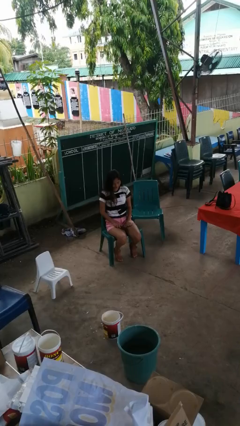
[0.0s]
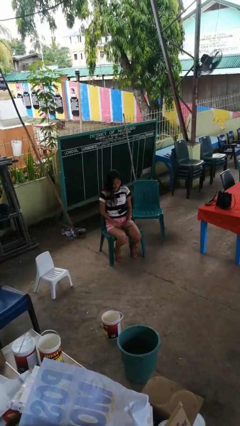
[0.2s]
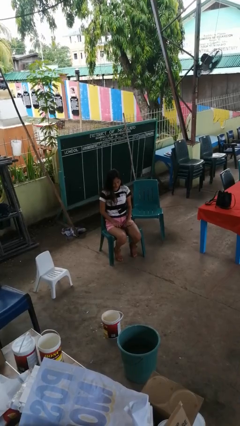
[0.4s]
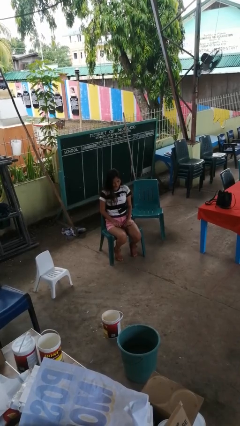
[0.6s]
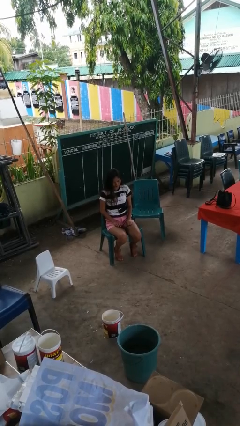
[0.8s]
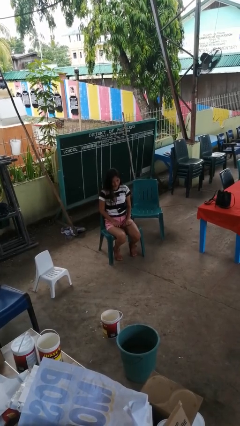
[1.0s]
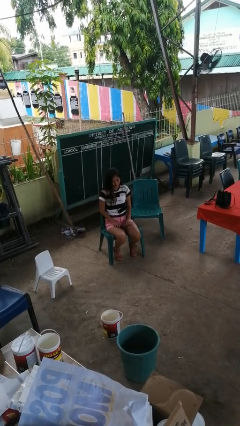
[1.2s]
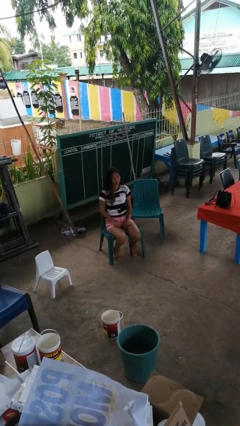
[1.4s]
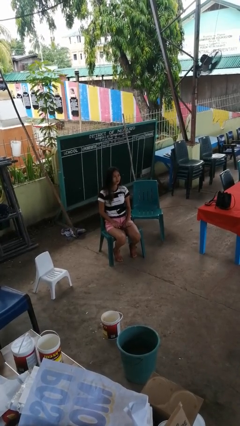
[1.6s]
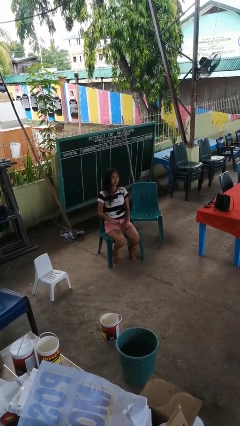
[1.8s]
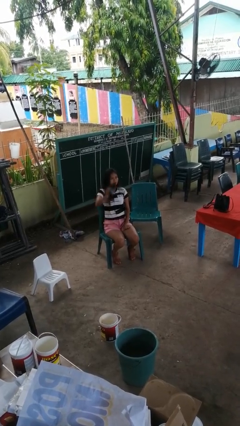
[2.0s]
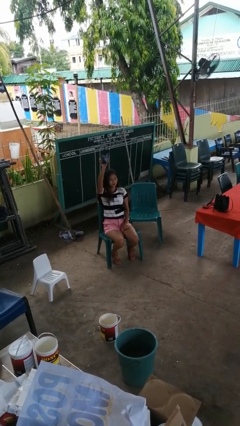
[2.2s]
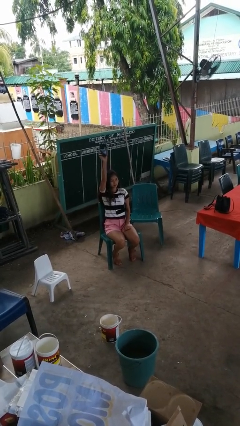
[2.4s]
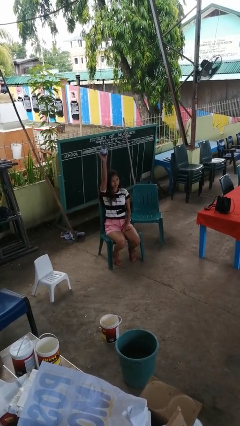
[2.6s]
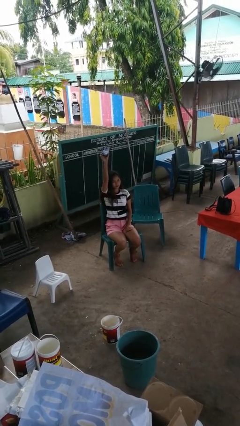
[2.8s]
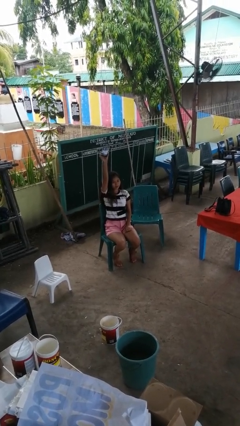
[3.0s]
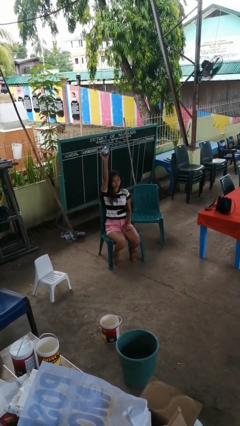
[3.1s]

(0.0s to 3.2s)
person holds object above head

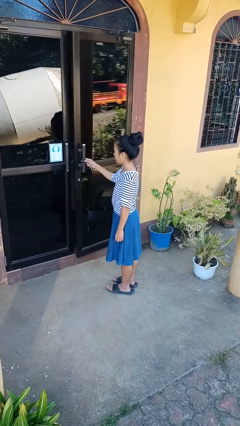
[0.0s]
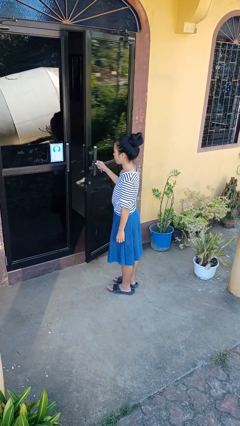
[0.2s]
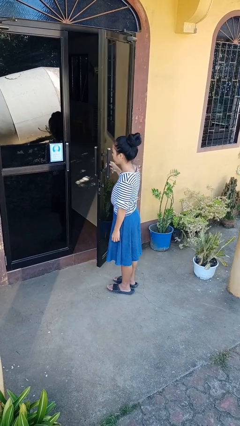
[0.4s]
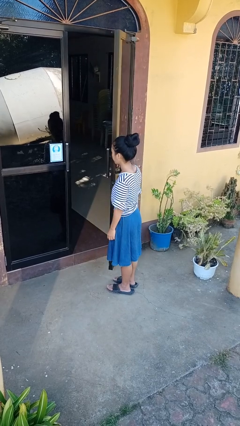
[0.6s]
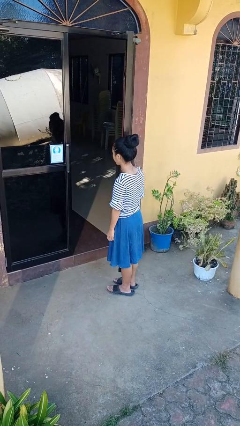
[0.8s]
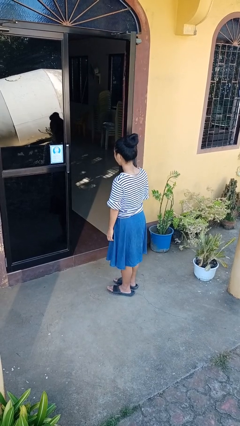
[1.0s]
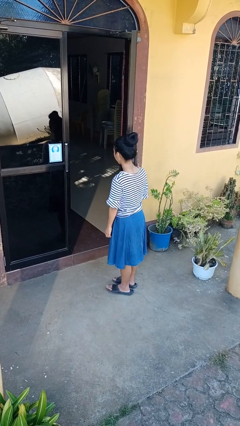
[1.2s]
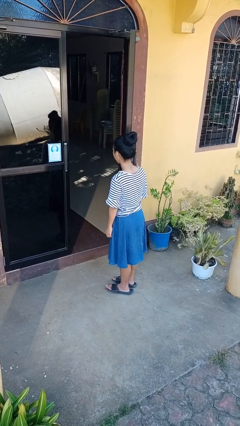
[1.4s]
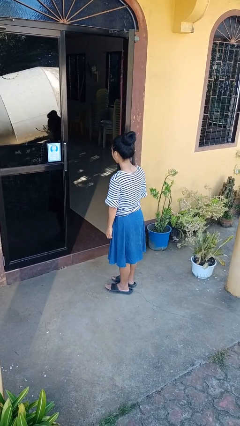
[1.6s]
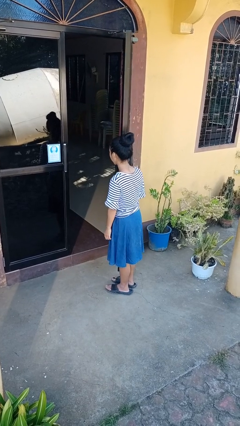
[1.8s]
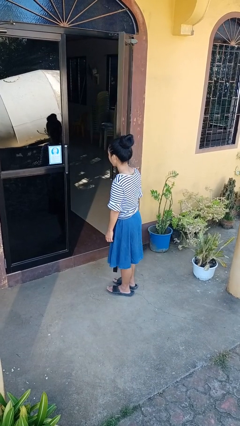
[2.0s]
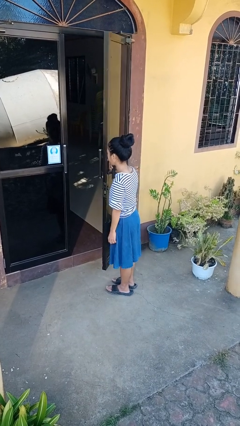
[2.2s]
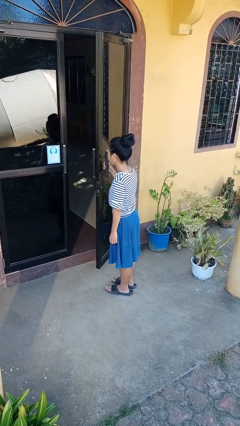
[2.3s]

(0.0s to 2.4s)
person opens facility door

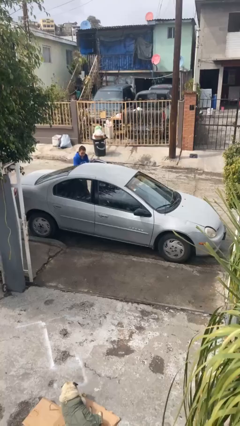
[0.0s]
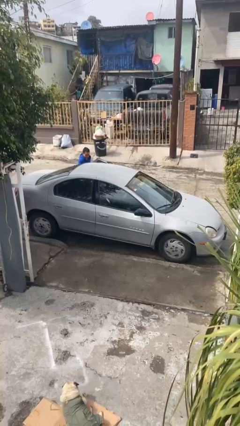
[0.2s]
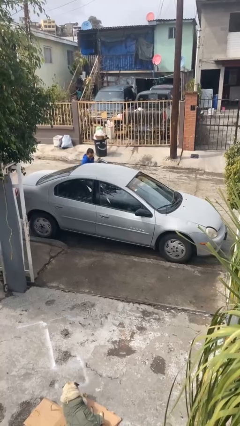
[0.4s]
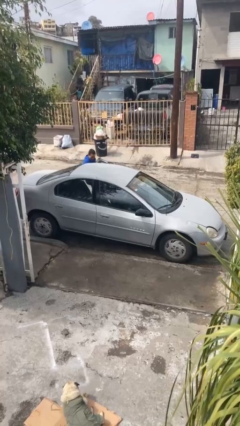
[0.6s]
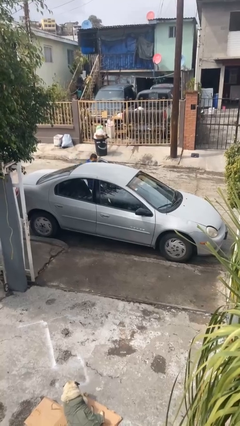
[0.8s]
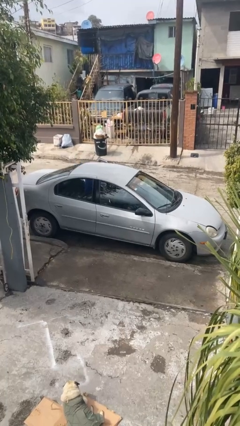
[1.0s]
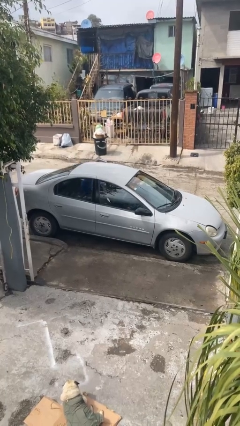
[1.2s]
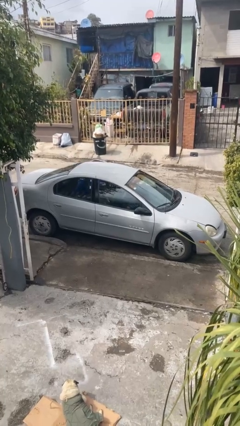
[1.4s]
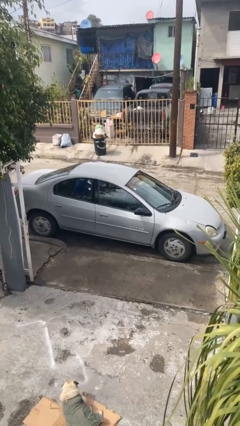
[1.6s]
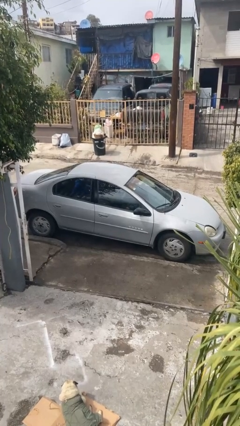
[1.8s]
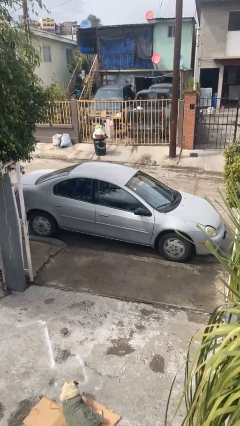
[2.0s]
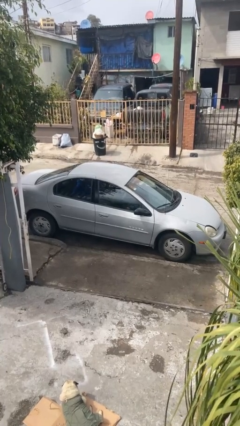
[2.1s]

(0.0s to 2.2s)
car picks up person

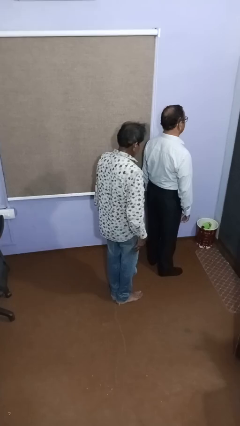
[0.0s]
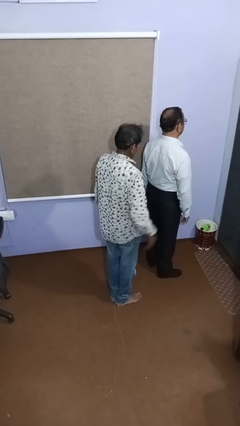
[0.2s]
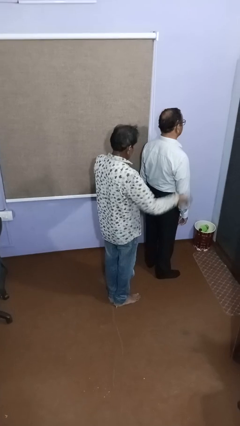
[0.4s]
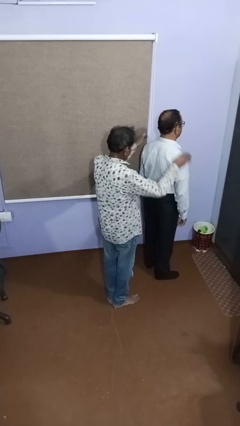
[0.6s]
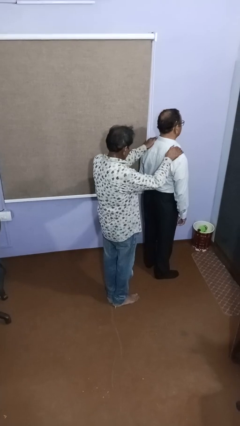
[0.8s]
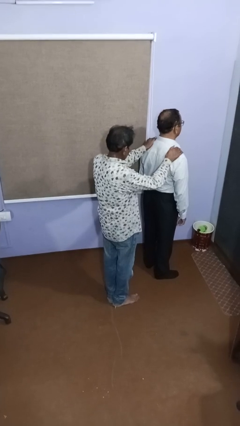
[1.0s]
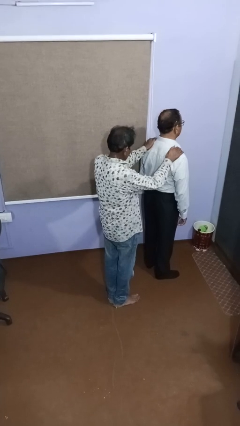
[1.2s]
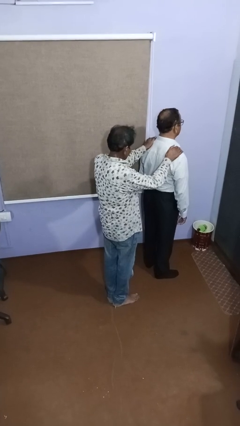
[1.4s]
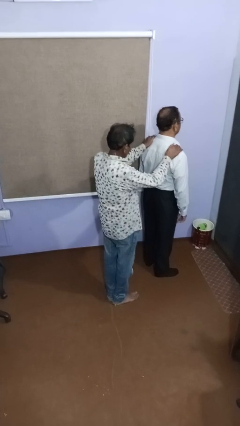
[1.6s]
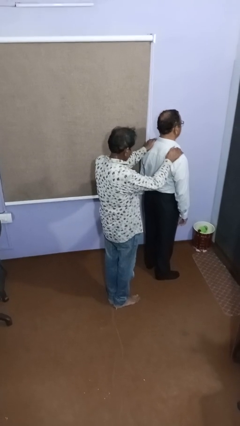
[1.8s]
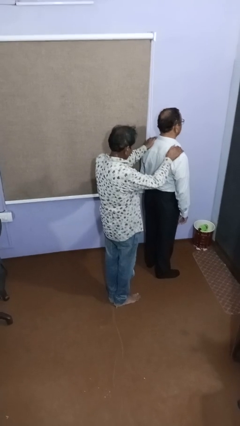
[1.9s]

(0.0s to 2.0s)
person grabs person by shoulder

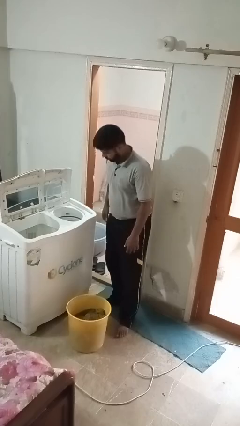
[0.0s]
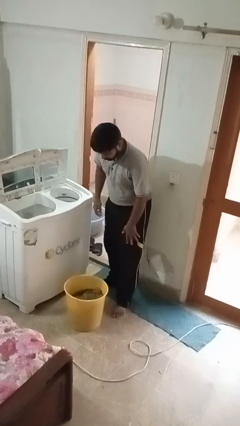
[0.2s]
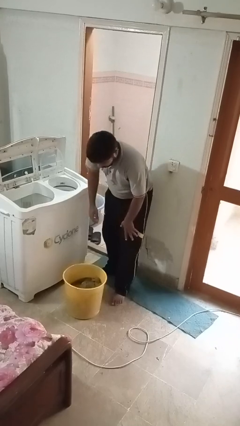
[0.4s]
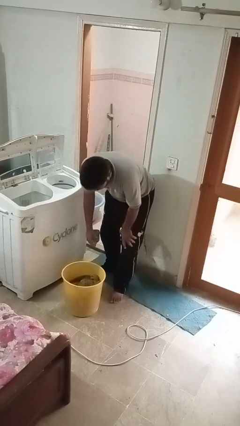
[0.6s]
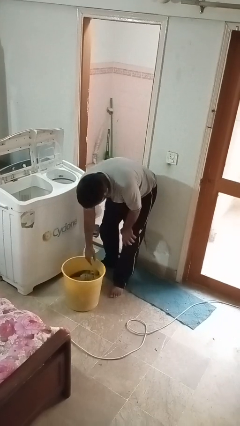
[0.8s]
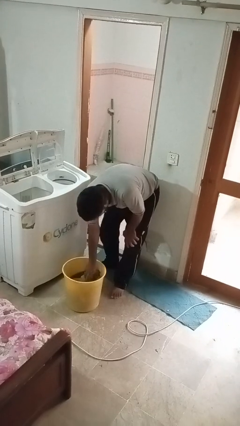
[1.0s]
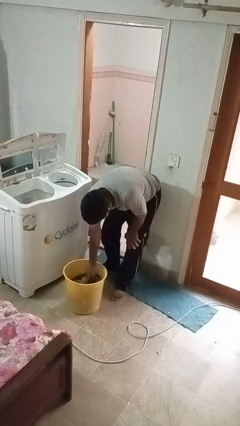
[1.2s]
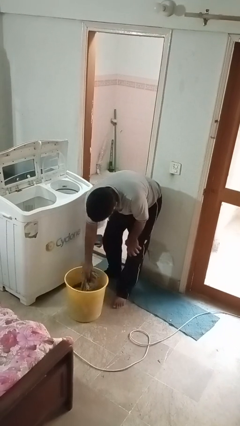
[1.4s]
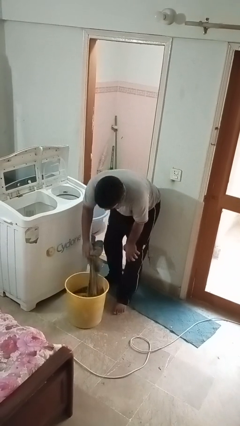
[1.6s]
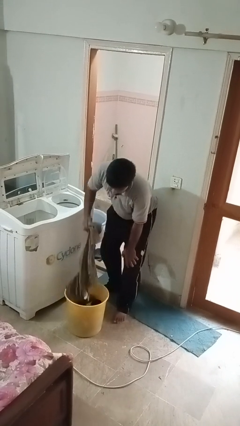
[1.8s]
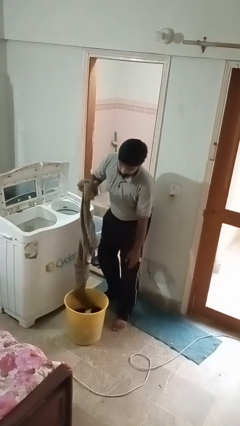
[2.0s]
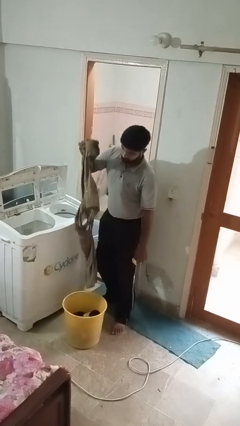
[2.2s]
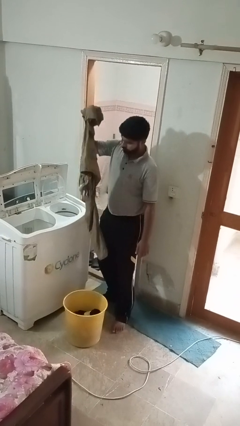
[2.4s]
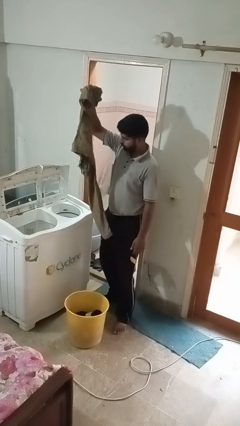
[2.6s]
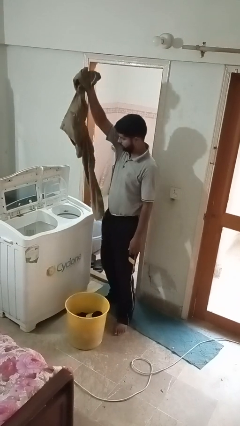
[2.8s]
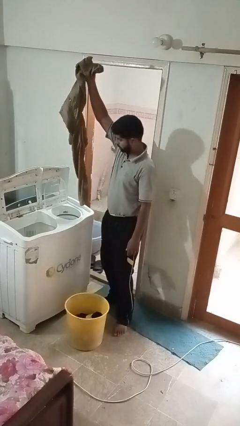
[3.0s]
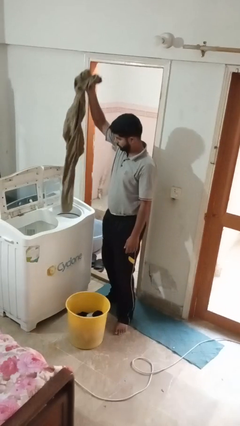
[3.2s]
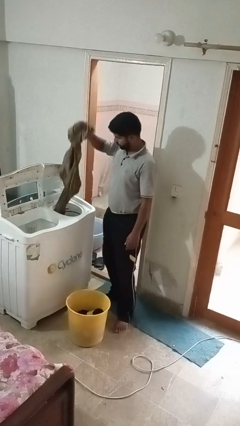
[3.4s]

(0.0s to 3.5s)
person loads dryer

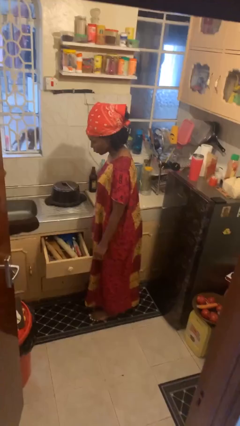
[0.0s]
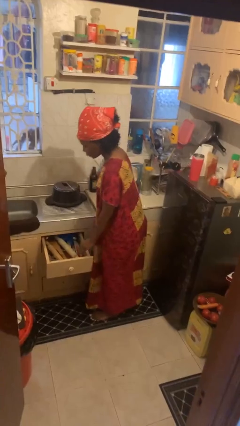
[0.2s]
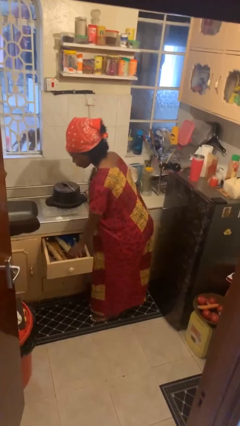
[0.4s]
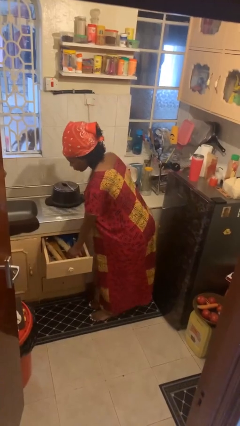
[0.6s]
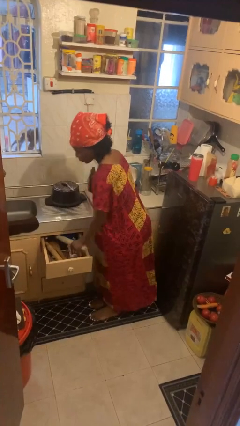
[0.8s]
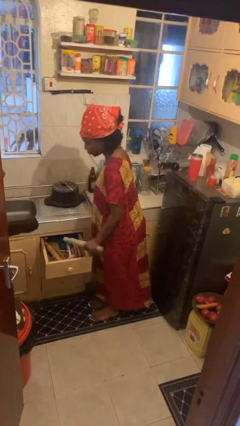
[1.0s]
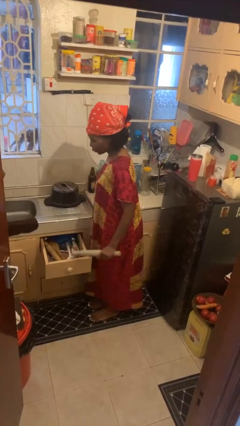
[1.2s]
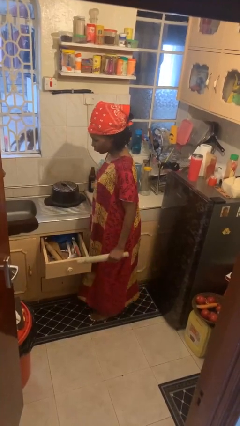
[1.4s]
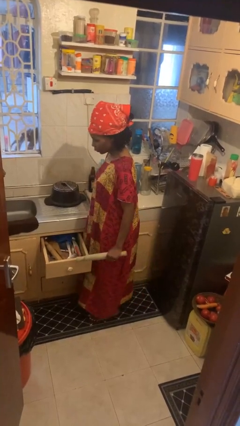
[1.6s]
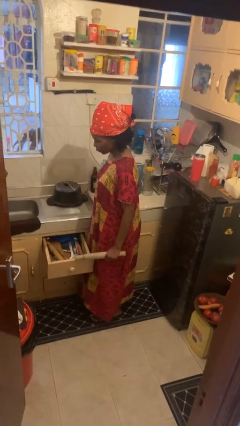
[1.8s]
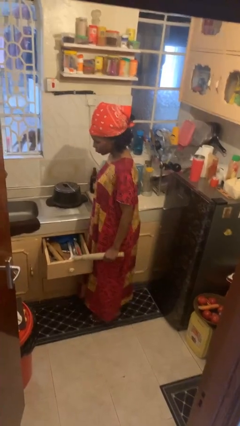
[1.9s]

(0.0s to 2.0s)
person takes object from kitchen drawer

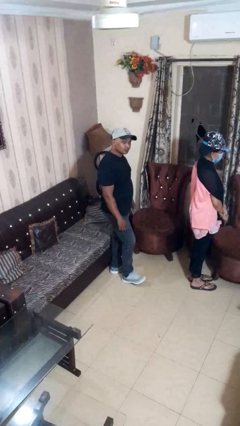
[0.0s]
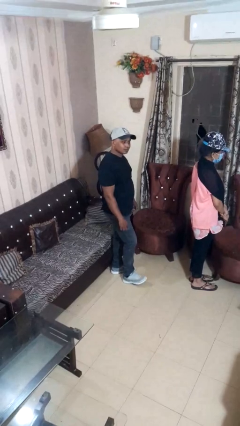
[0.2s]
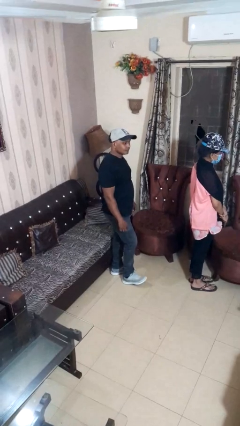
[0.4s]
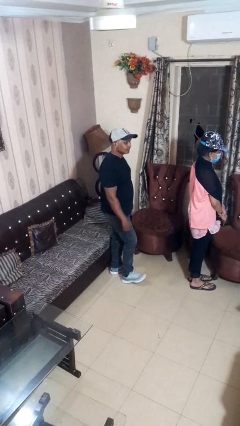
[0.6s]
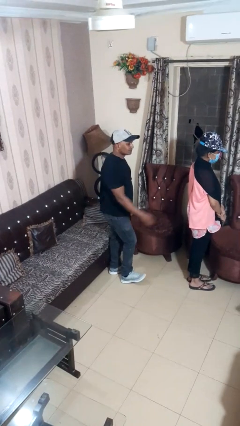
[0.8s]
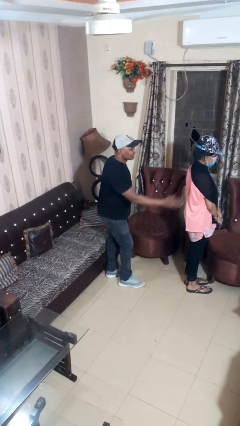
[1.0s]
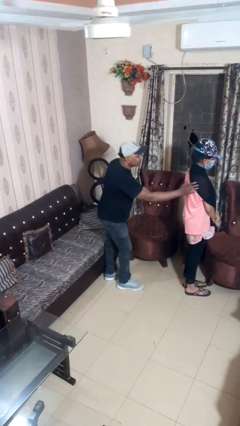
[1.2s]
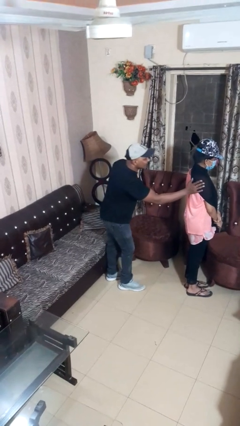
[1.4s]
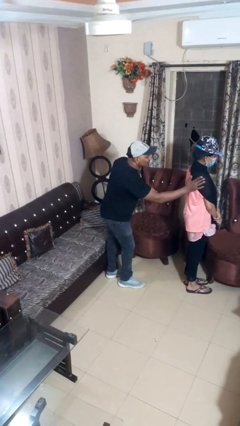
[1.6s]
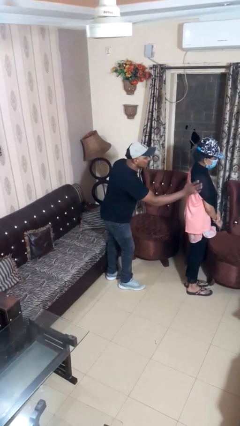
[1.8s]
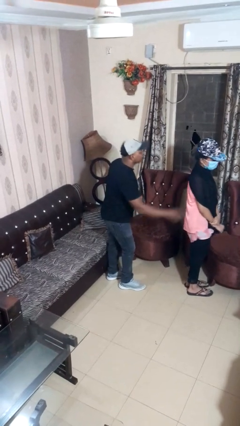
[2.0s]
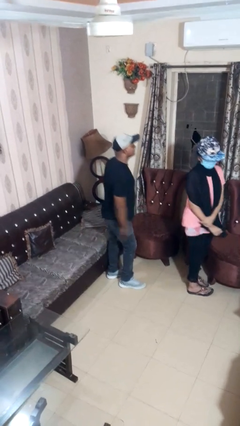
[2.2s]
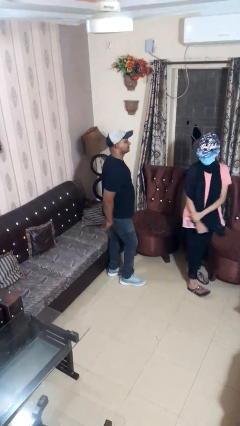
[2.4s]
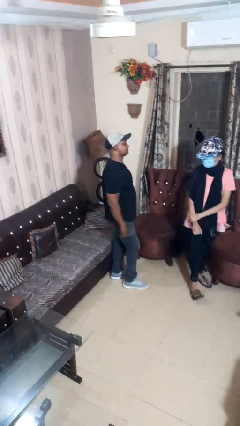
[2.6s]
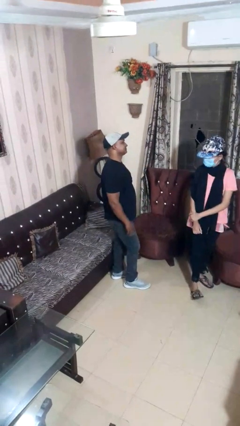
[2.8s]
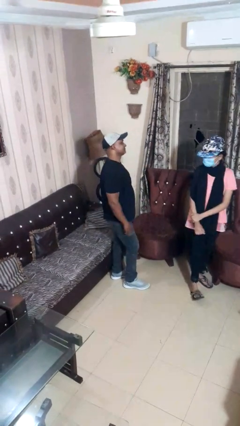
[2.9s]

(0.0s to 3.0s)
person touches back of person
